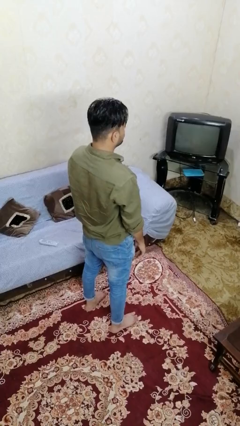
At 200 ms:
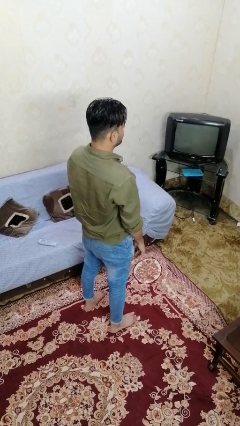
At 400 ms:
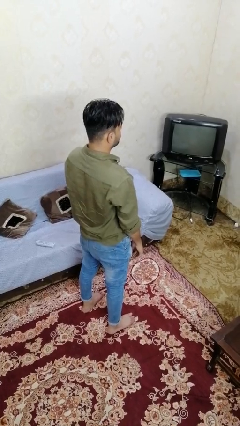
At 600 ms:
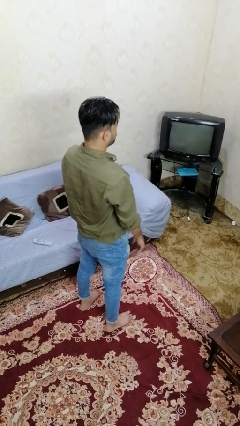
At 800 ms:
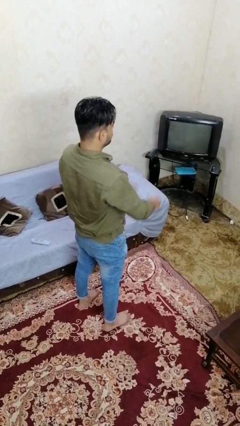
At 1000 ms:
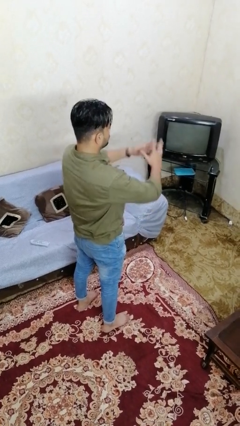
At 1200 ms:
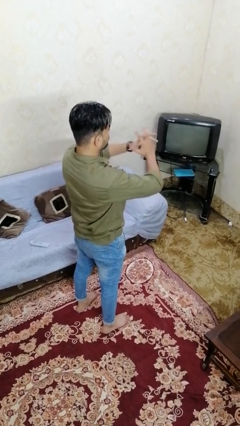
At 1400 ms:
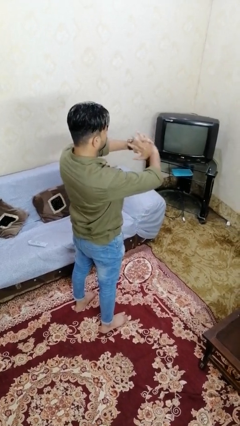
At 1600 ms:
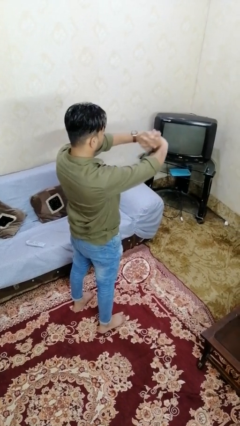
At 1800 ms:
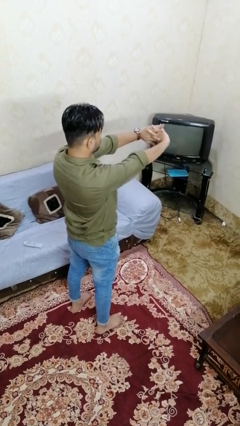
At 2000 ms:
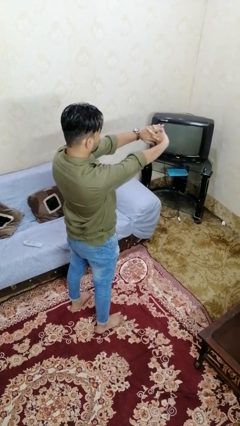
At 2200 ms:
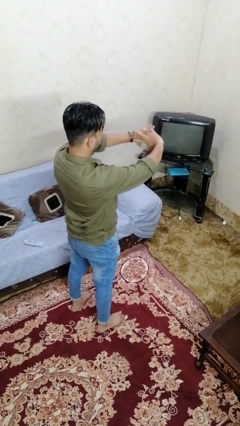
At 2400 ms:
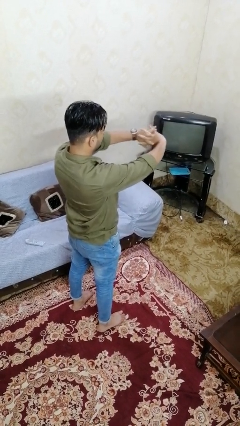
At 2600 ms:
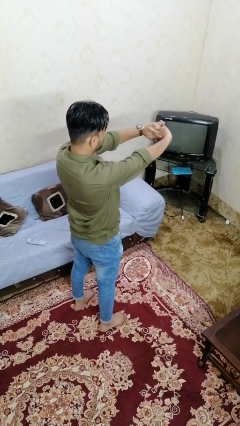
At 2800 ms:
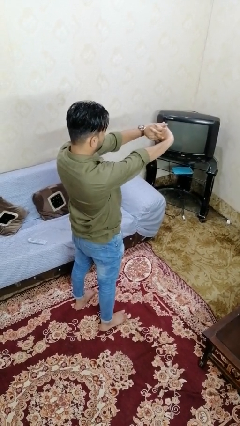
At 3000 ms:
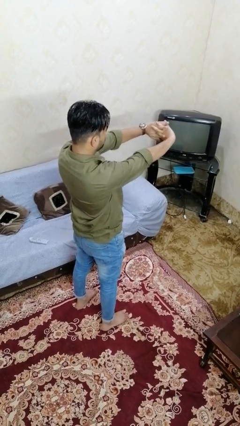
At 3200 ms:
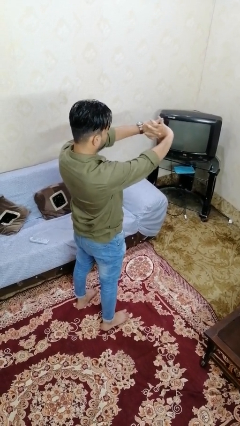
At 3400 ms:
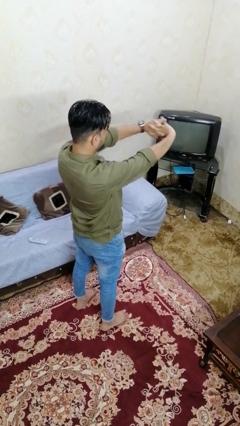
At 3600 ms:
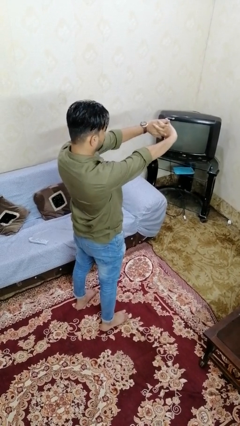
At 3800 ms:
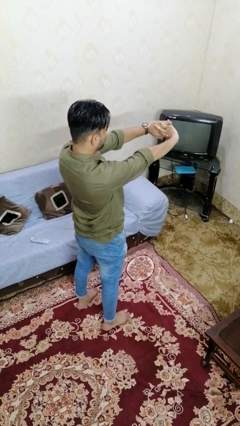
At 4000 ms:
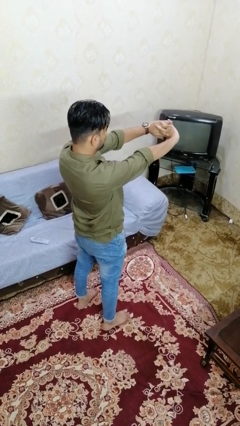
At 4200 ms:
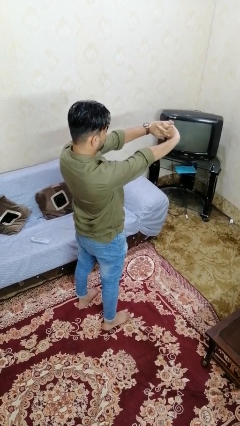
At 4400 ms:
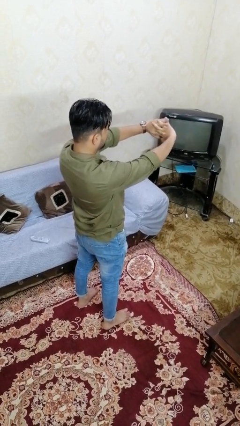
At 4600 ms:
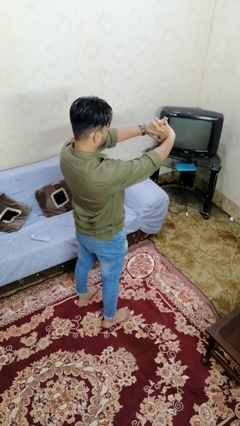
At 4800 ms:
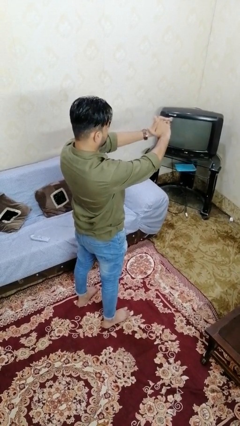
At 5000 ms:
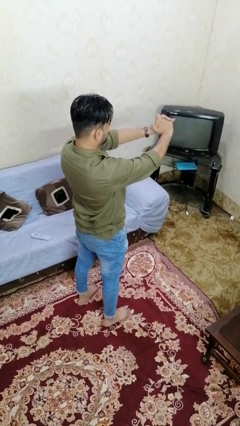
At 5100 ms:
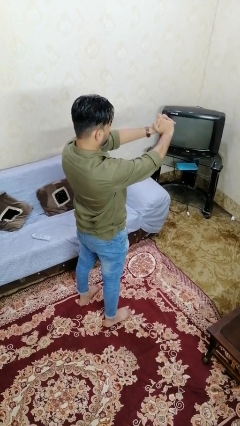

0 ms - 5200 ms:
person cracks knuckles

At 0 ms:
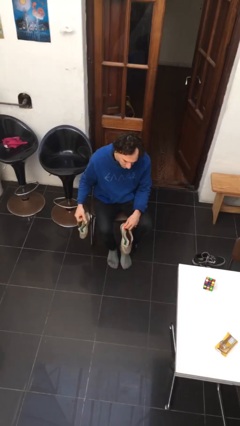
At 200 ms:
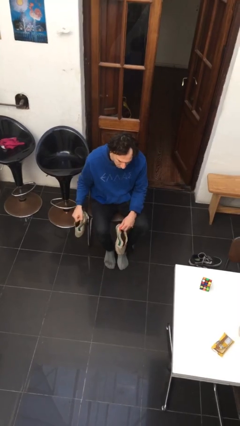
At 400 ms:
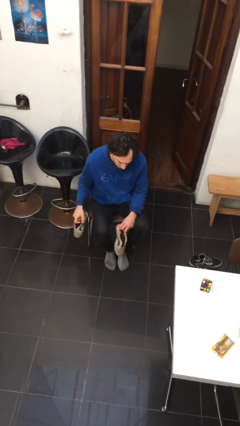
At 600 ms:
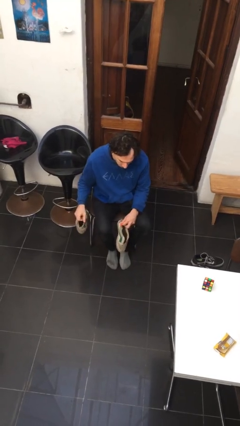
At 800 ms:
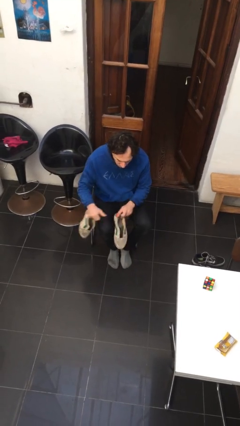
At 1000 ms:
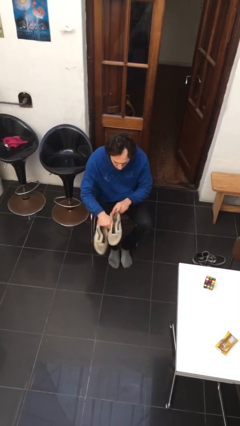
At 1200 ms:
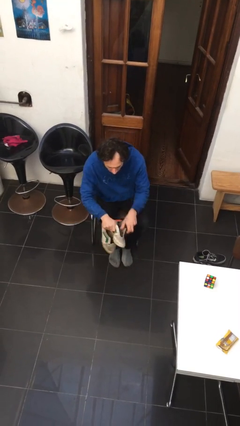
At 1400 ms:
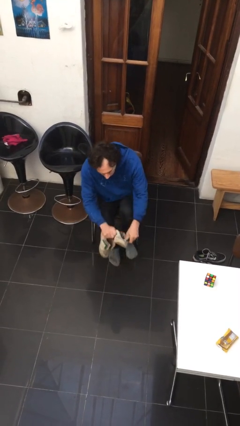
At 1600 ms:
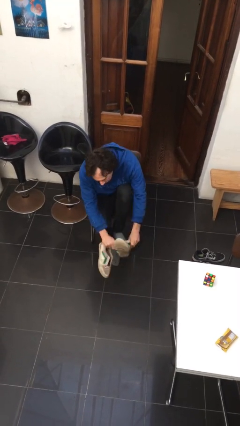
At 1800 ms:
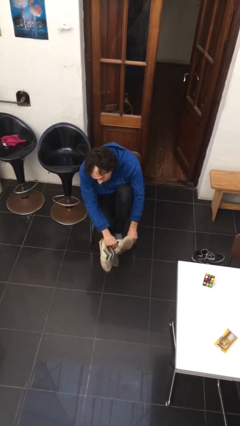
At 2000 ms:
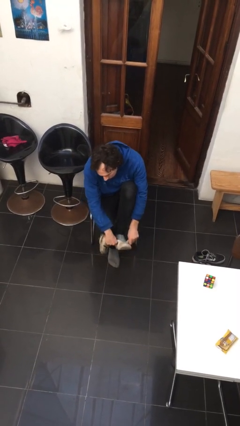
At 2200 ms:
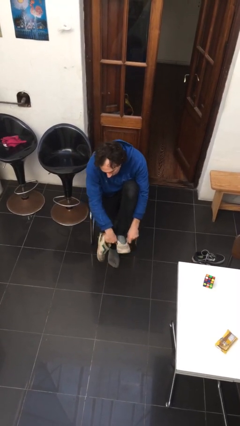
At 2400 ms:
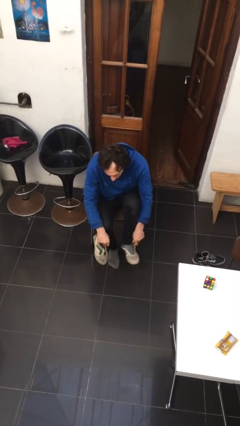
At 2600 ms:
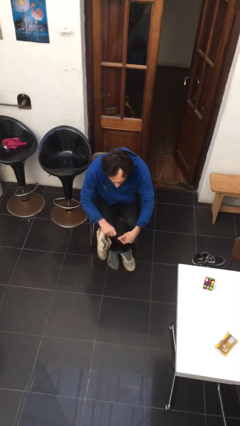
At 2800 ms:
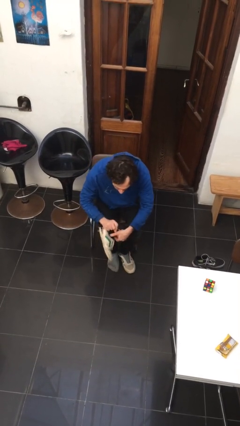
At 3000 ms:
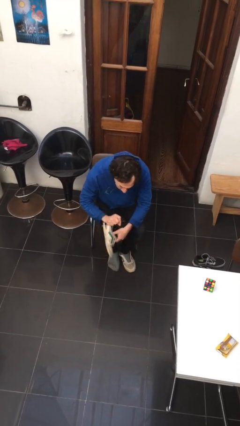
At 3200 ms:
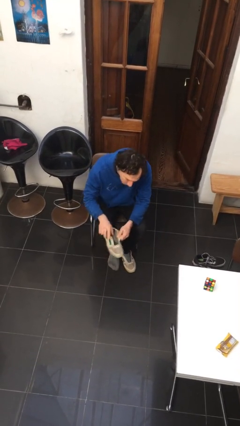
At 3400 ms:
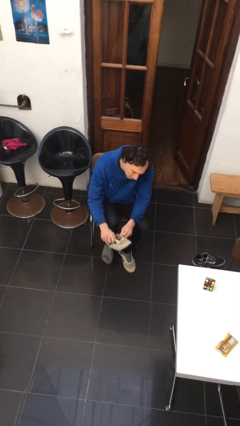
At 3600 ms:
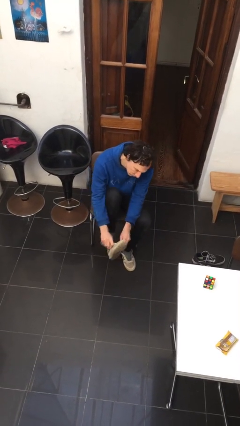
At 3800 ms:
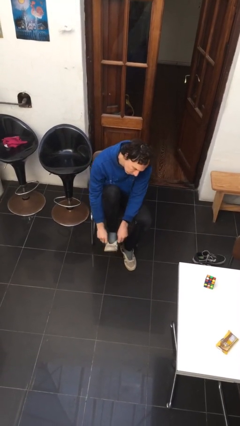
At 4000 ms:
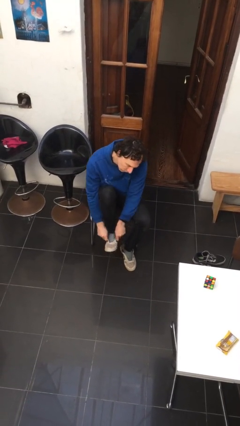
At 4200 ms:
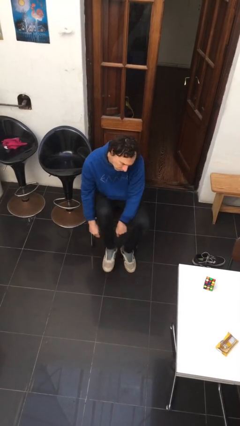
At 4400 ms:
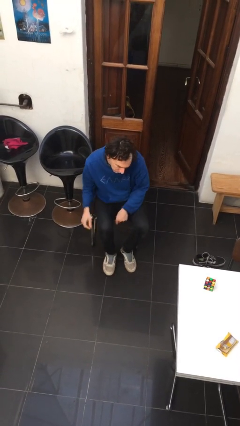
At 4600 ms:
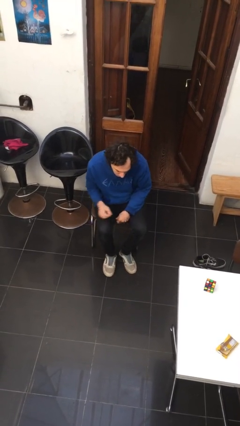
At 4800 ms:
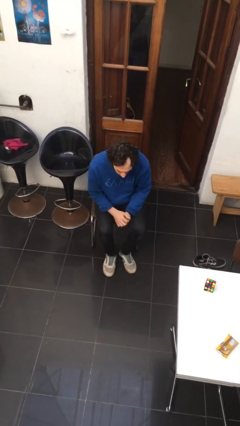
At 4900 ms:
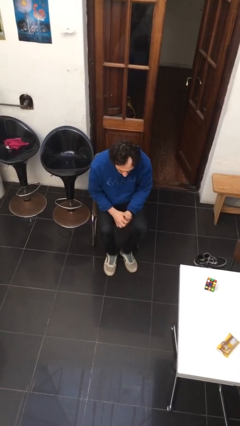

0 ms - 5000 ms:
person puts on shoes

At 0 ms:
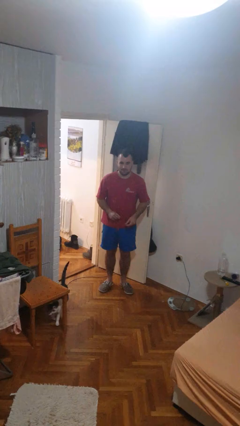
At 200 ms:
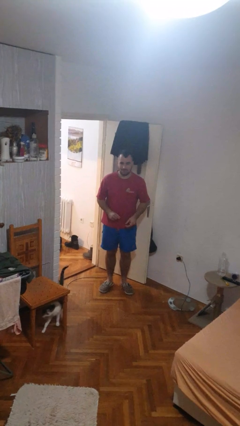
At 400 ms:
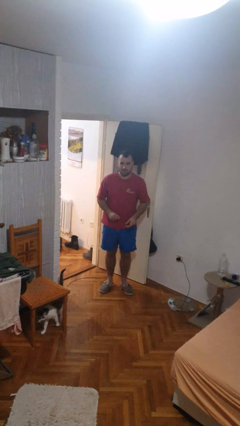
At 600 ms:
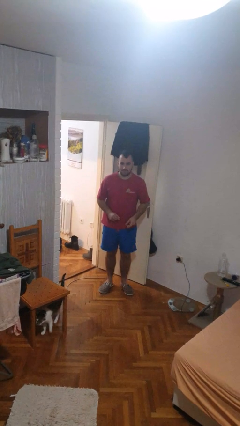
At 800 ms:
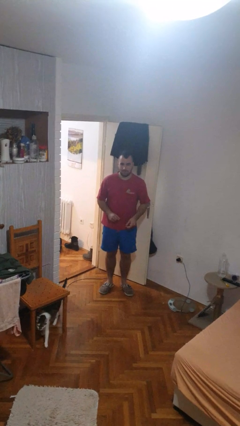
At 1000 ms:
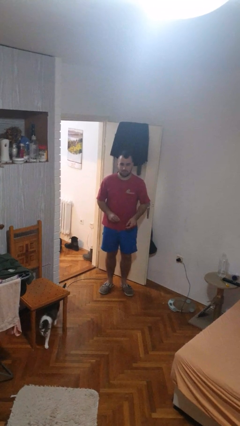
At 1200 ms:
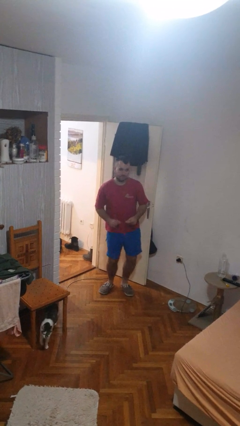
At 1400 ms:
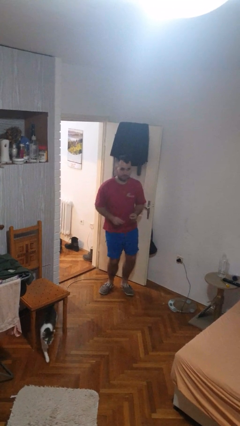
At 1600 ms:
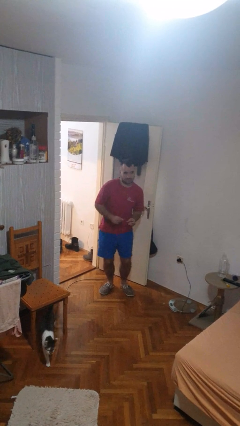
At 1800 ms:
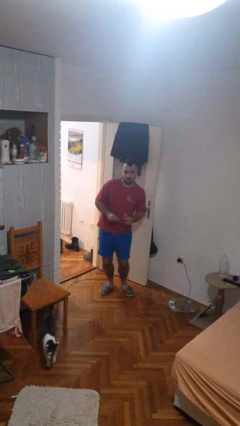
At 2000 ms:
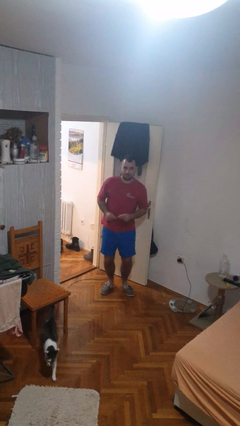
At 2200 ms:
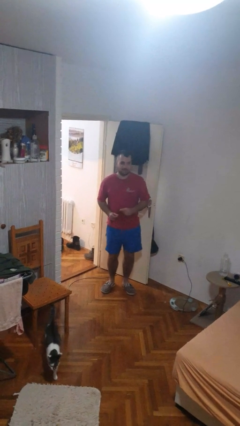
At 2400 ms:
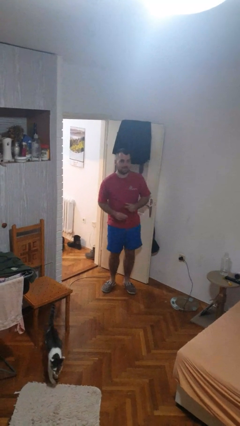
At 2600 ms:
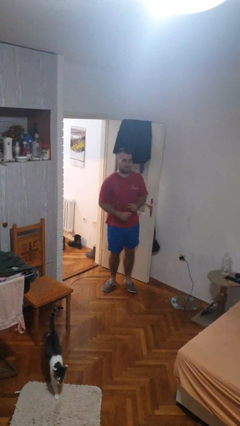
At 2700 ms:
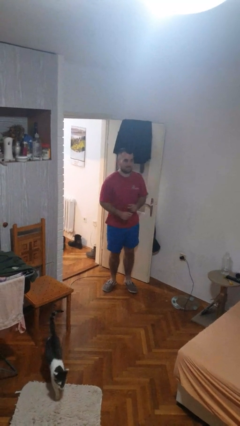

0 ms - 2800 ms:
person dances in place

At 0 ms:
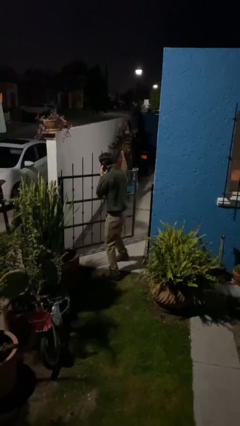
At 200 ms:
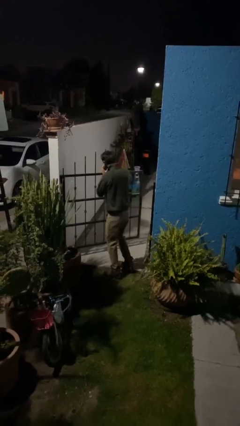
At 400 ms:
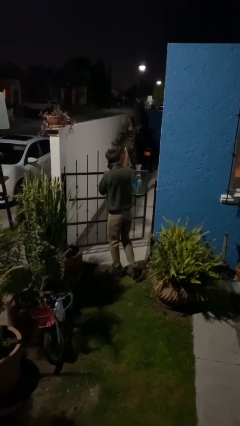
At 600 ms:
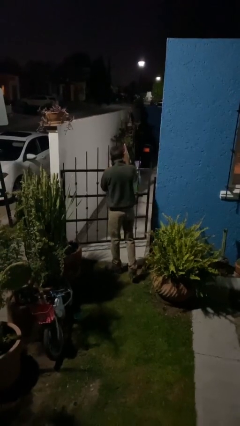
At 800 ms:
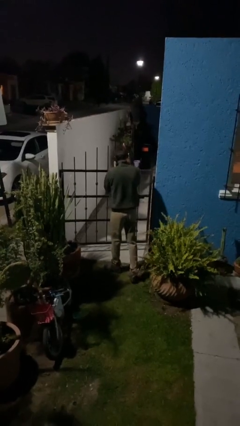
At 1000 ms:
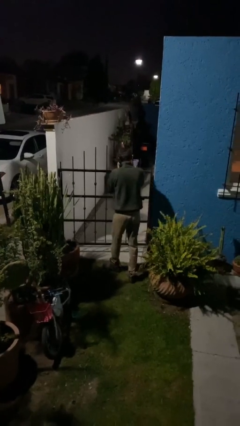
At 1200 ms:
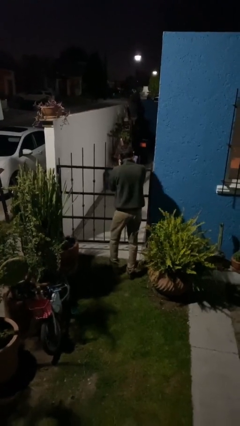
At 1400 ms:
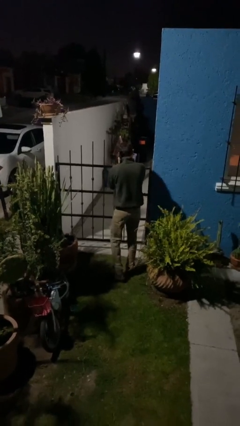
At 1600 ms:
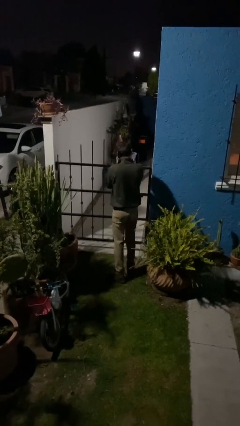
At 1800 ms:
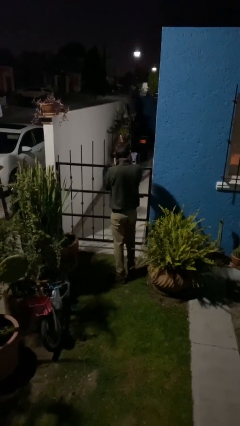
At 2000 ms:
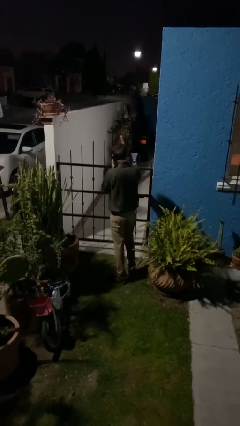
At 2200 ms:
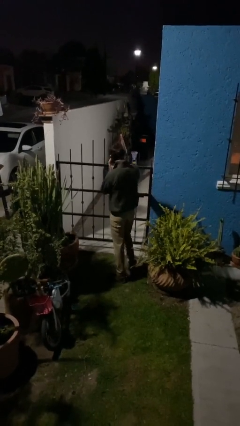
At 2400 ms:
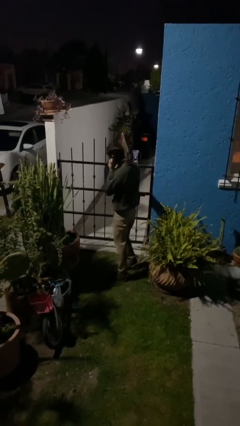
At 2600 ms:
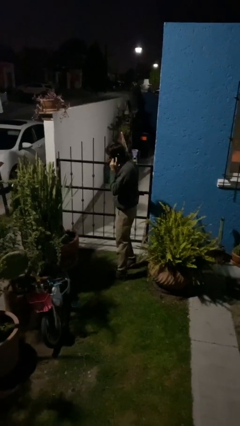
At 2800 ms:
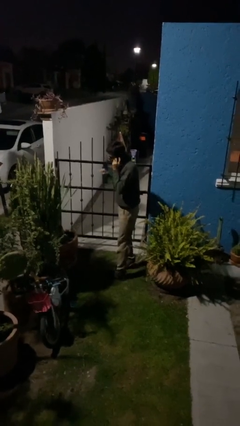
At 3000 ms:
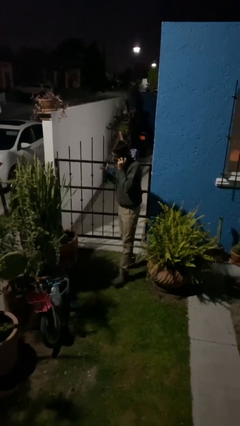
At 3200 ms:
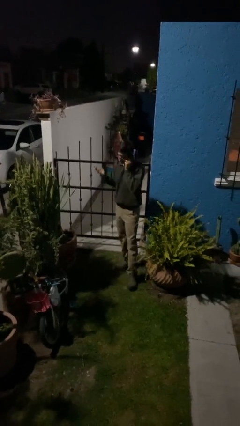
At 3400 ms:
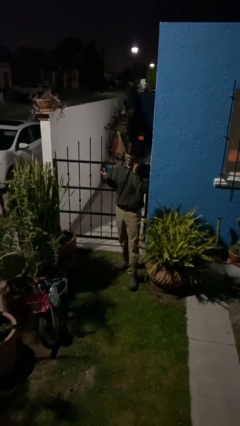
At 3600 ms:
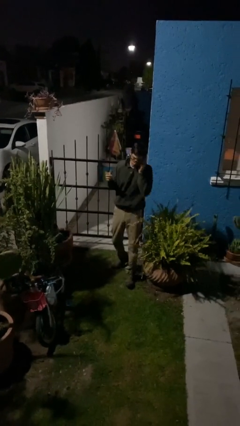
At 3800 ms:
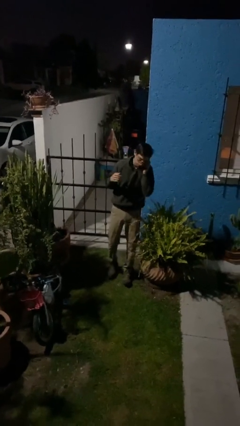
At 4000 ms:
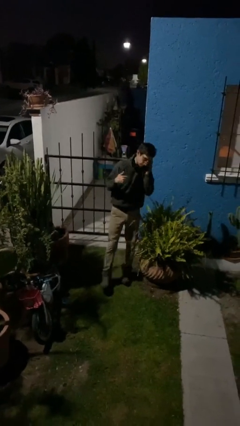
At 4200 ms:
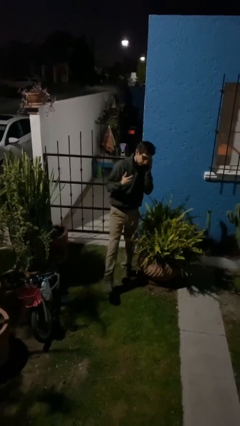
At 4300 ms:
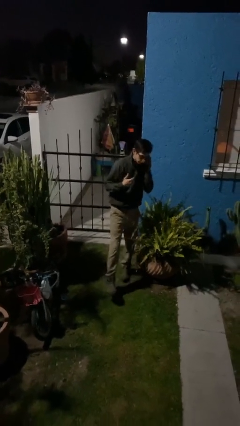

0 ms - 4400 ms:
person closes facility door

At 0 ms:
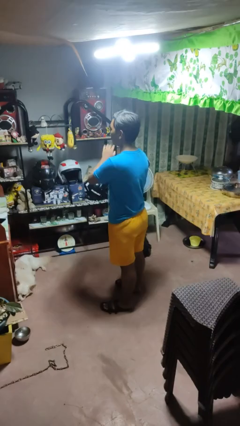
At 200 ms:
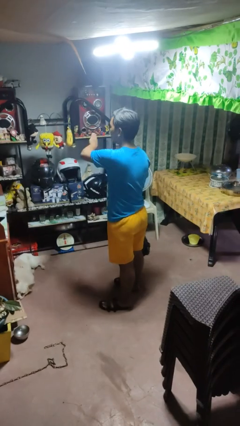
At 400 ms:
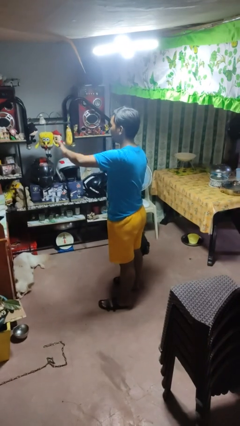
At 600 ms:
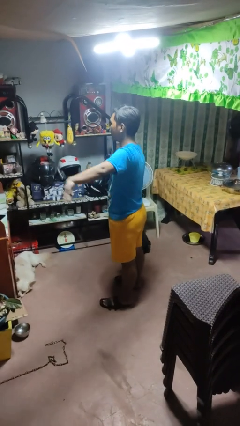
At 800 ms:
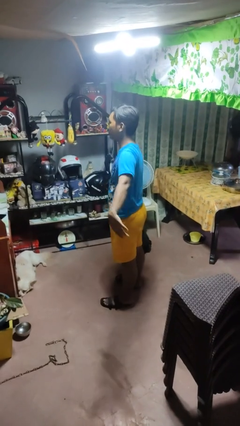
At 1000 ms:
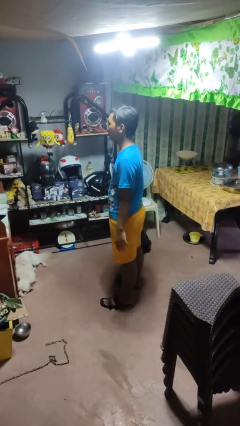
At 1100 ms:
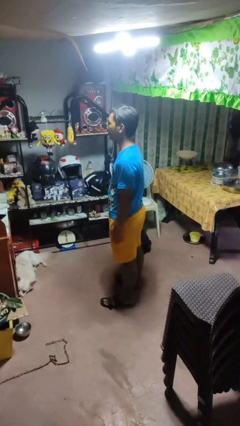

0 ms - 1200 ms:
person gestures swipe left